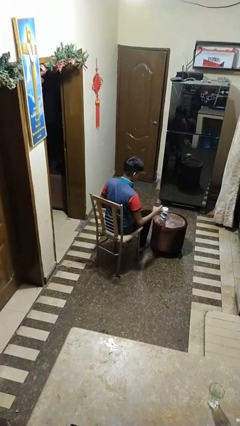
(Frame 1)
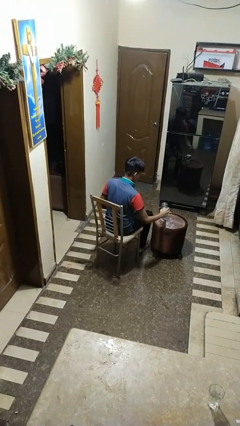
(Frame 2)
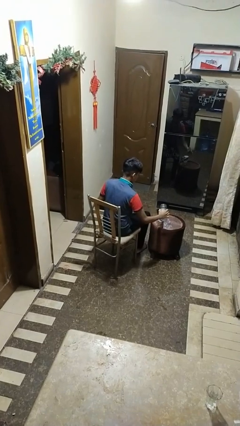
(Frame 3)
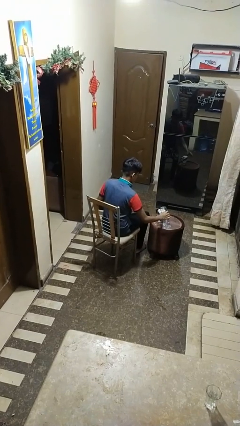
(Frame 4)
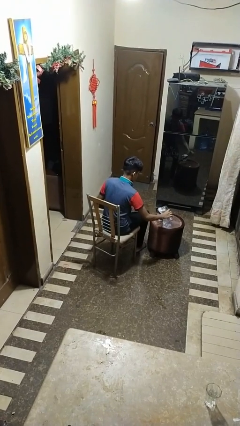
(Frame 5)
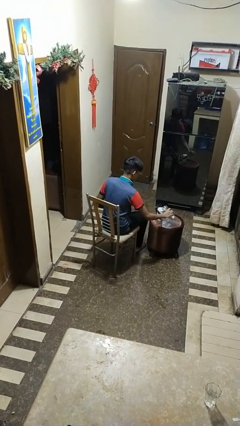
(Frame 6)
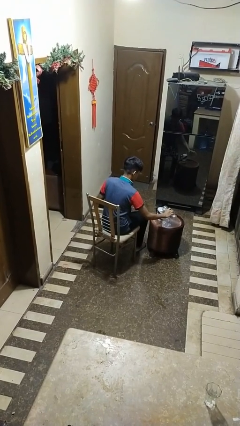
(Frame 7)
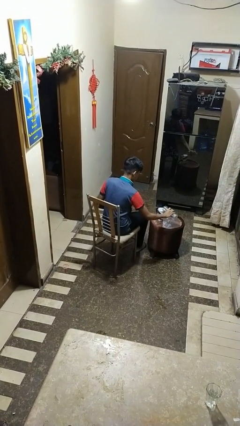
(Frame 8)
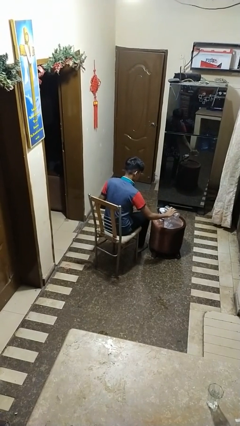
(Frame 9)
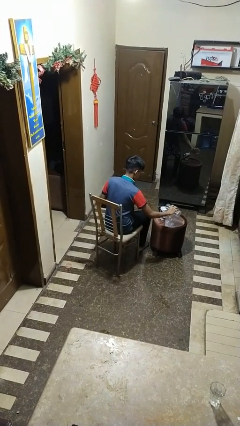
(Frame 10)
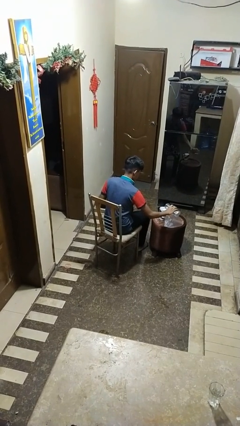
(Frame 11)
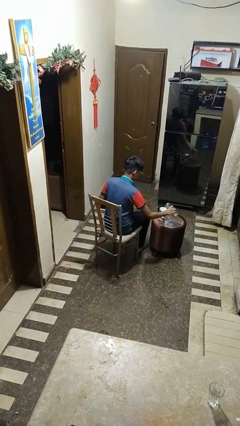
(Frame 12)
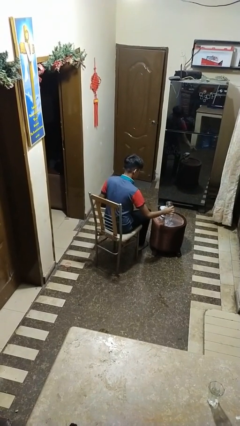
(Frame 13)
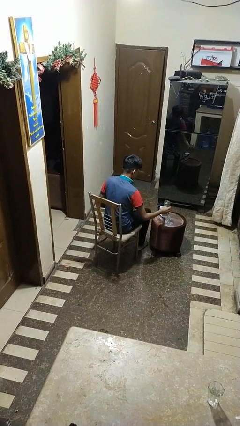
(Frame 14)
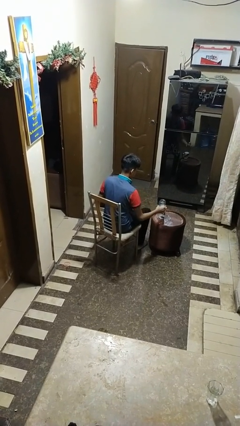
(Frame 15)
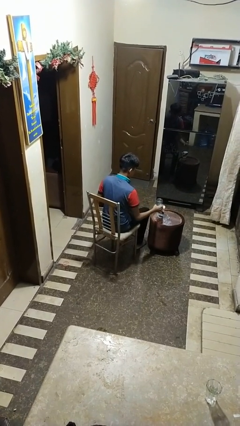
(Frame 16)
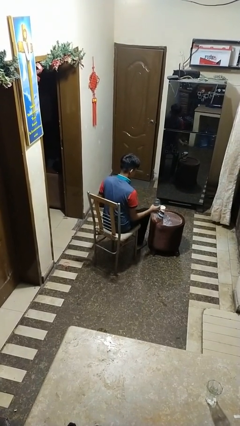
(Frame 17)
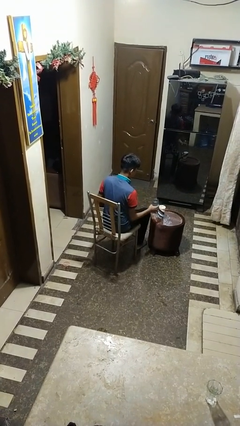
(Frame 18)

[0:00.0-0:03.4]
person pours liquid into cup

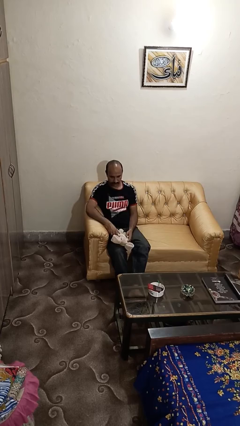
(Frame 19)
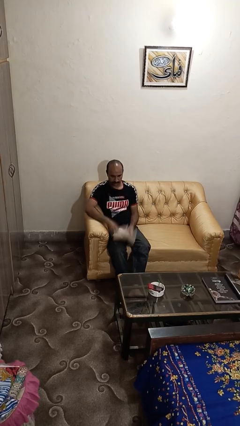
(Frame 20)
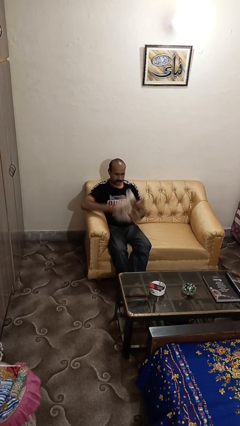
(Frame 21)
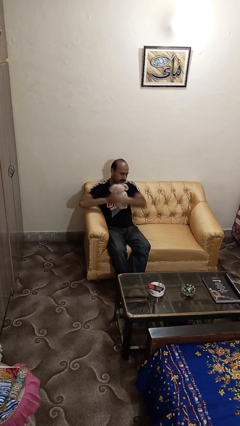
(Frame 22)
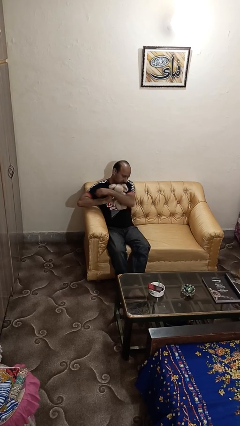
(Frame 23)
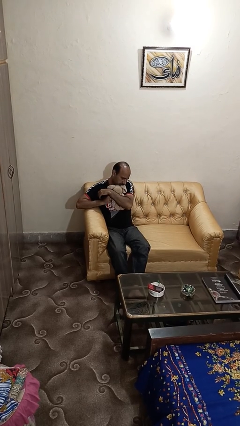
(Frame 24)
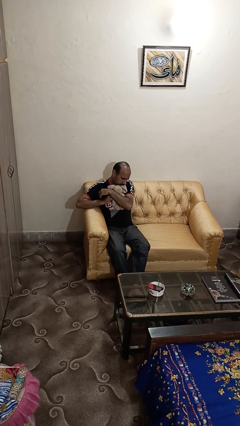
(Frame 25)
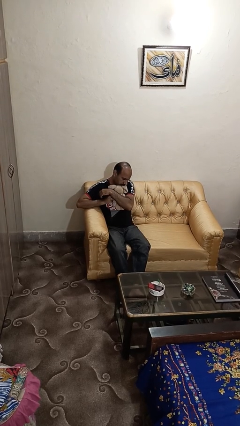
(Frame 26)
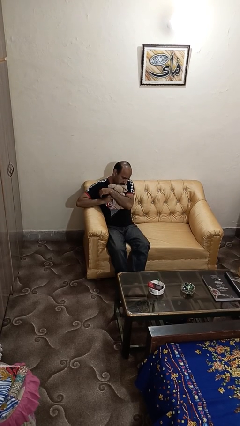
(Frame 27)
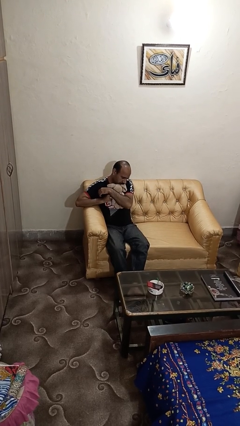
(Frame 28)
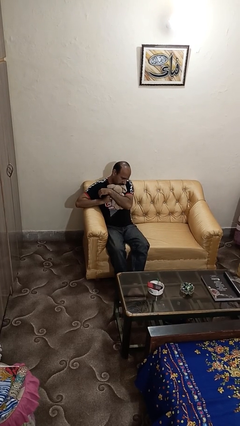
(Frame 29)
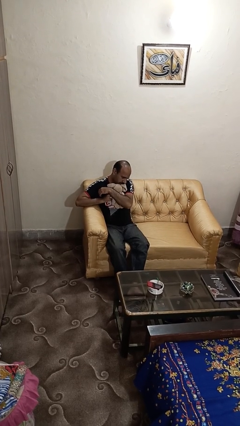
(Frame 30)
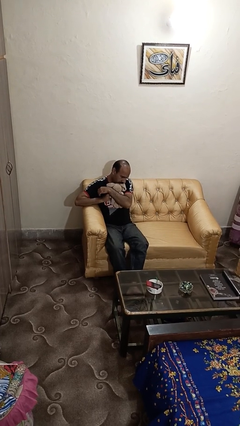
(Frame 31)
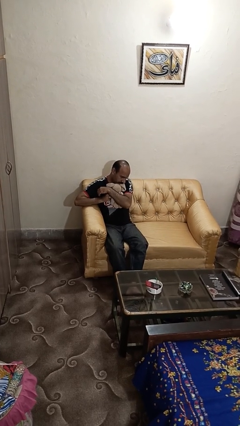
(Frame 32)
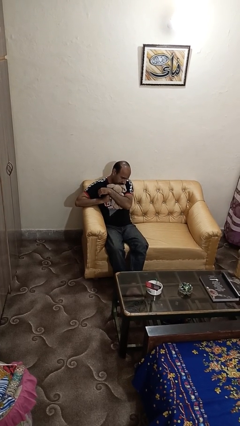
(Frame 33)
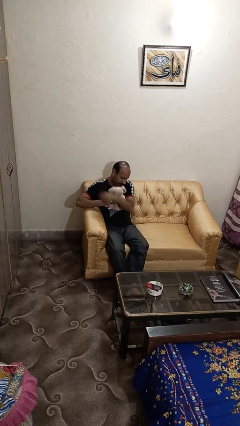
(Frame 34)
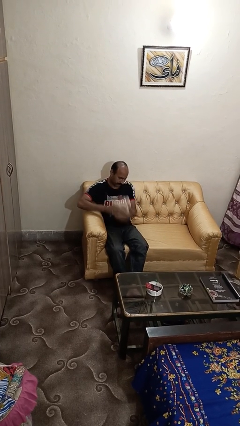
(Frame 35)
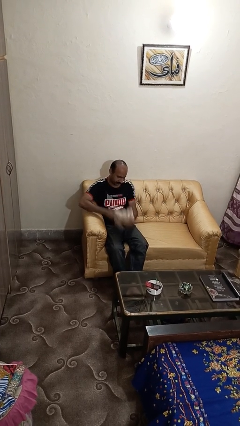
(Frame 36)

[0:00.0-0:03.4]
person hugs stuffed animal

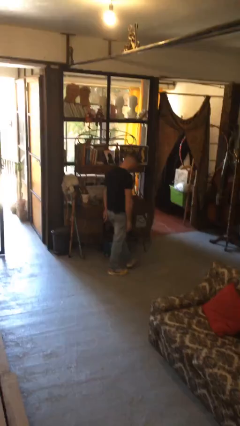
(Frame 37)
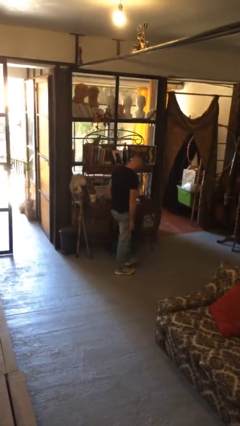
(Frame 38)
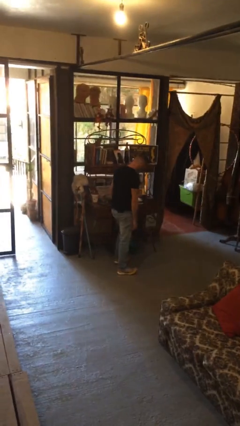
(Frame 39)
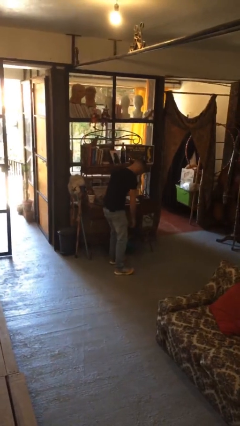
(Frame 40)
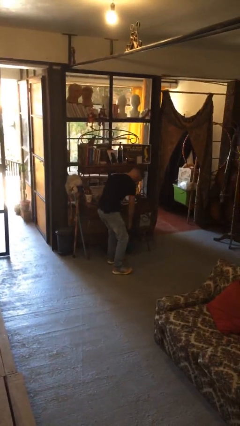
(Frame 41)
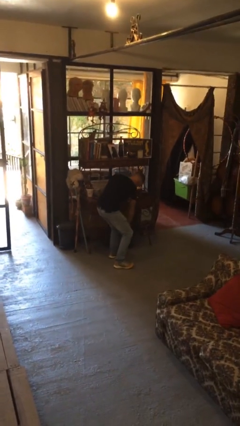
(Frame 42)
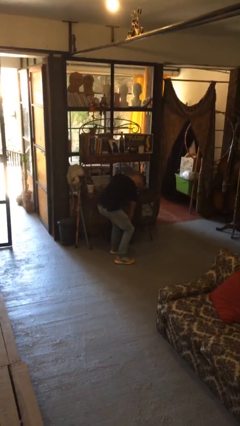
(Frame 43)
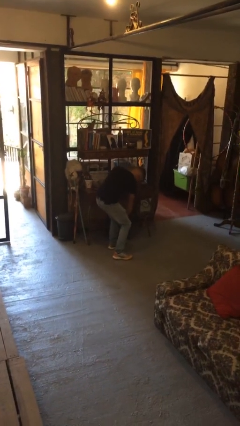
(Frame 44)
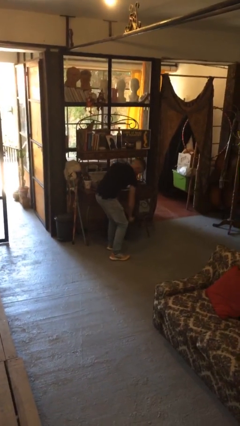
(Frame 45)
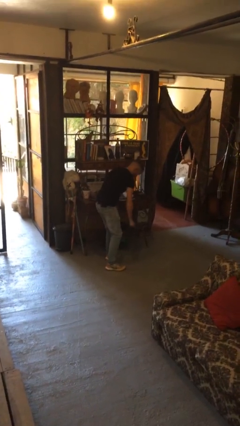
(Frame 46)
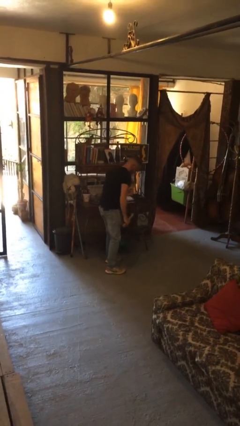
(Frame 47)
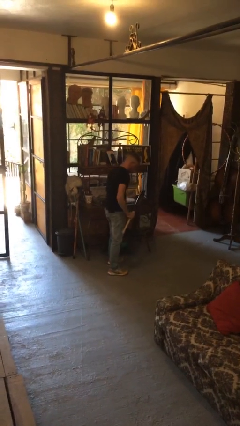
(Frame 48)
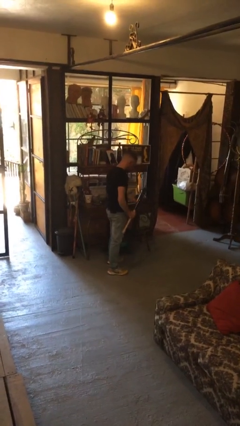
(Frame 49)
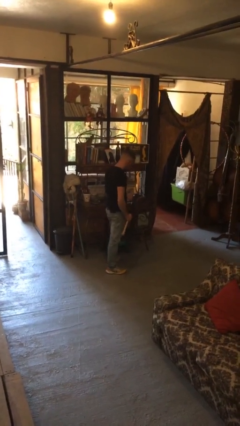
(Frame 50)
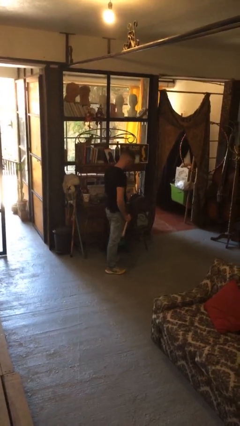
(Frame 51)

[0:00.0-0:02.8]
person picks up object from cabinet

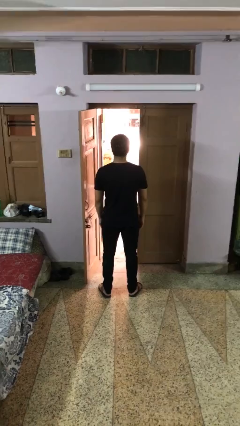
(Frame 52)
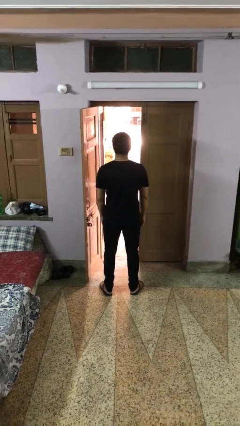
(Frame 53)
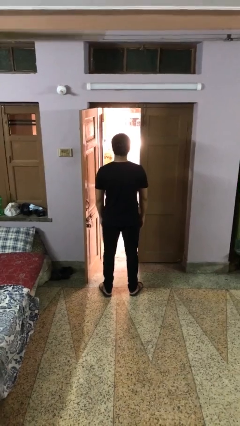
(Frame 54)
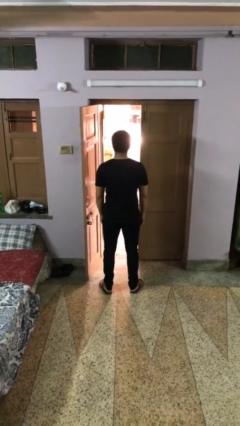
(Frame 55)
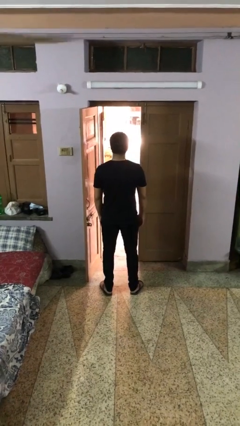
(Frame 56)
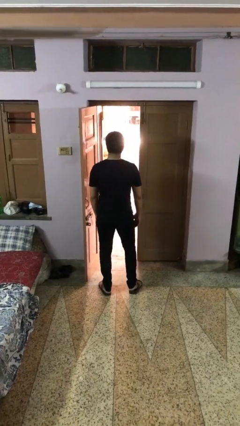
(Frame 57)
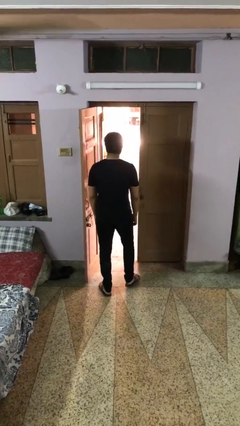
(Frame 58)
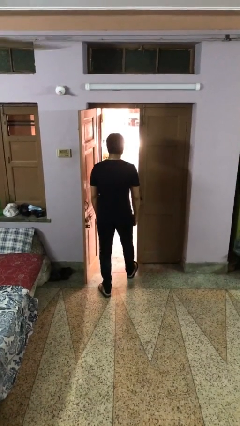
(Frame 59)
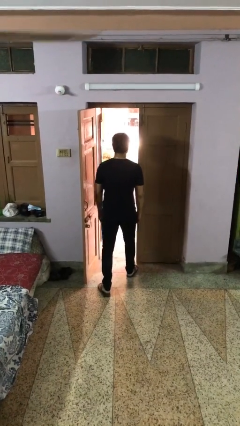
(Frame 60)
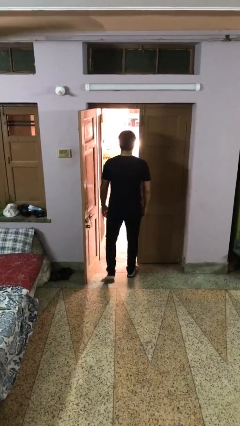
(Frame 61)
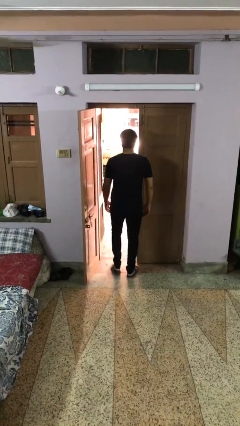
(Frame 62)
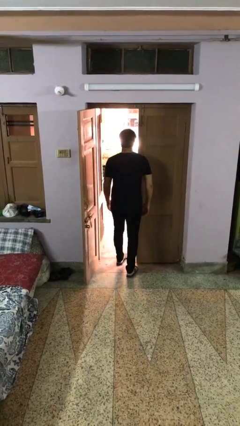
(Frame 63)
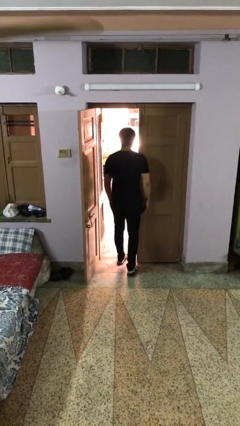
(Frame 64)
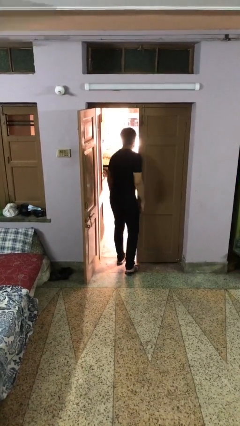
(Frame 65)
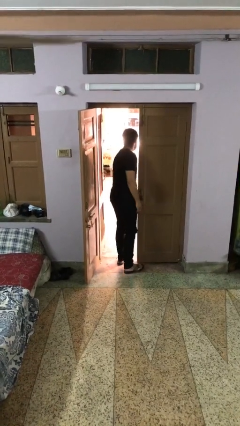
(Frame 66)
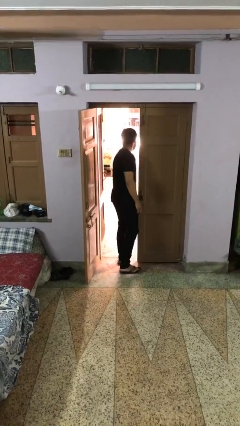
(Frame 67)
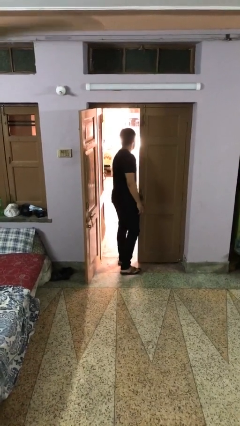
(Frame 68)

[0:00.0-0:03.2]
person bumps into wall

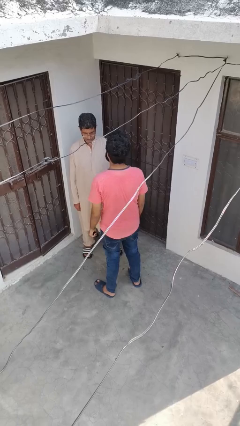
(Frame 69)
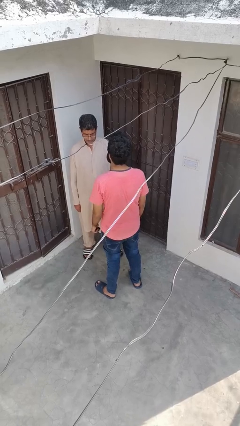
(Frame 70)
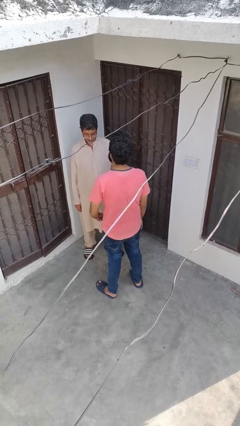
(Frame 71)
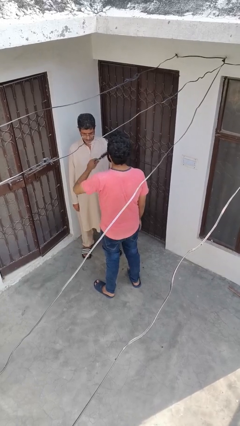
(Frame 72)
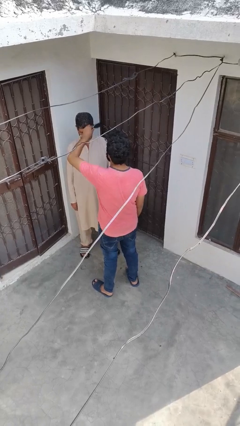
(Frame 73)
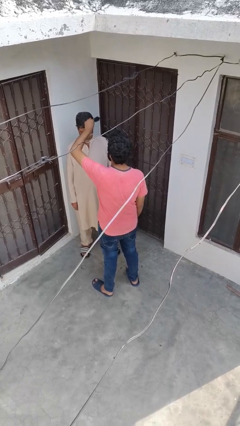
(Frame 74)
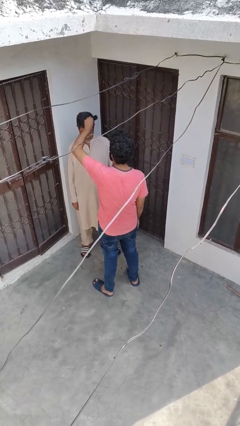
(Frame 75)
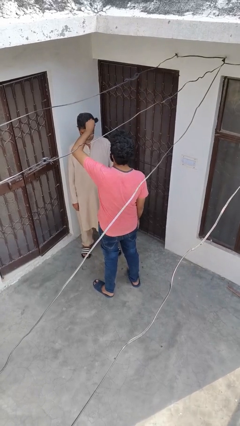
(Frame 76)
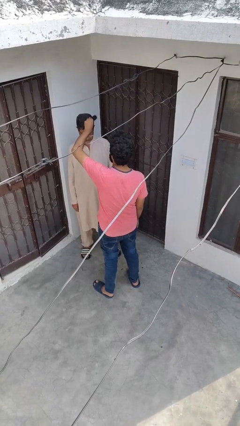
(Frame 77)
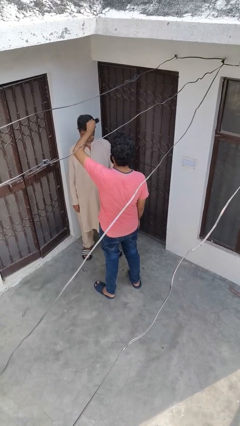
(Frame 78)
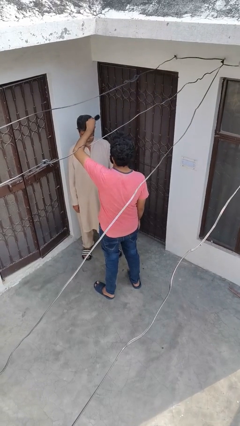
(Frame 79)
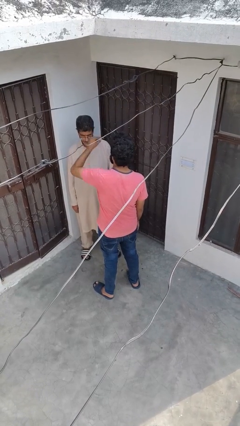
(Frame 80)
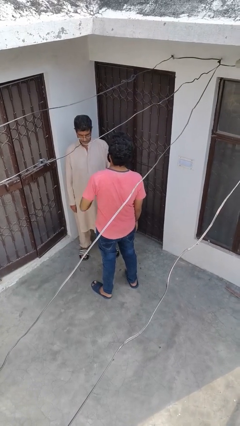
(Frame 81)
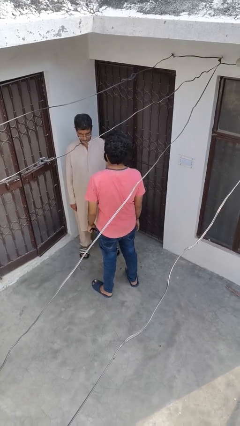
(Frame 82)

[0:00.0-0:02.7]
person brushes hair of person

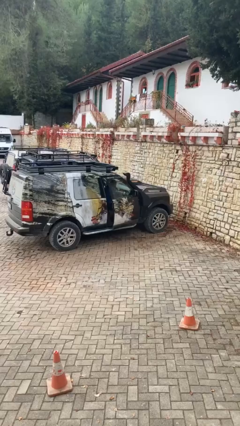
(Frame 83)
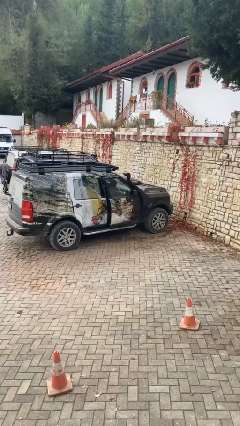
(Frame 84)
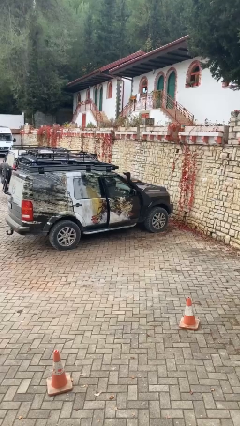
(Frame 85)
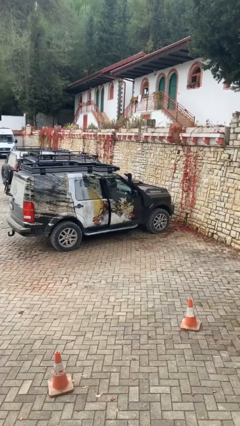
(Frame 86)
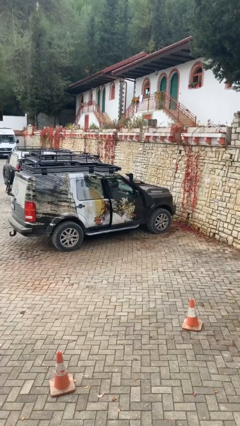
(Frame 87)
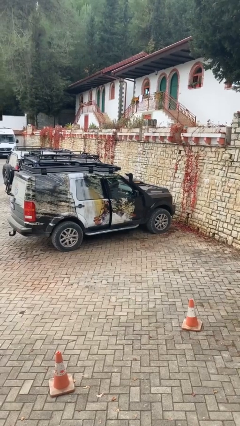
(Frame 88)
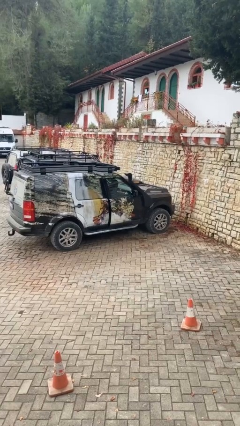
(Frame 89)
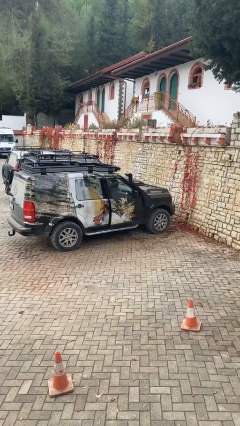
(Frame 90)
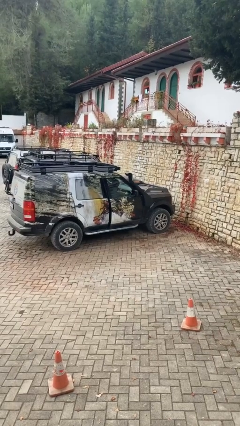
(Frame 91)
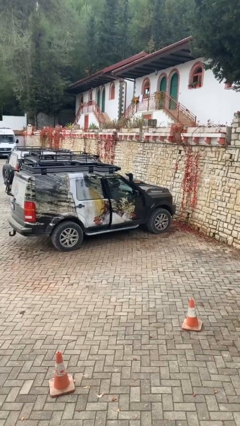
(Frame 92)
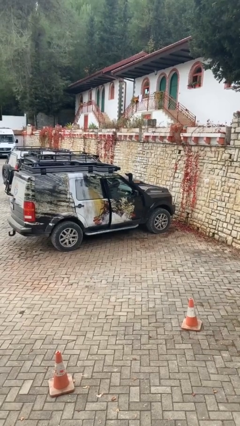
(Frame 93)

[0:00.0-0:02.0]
person closes car door

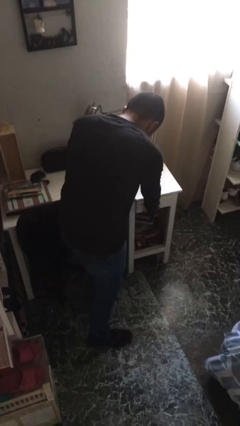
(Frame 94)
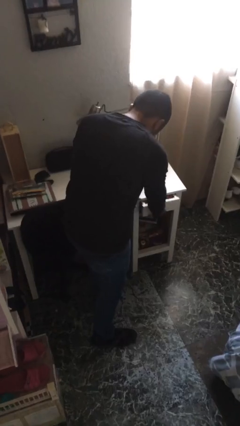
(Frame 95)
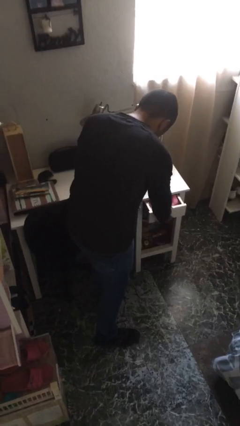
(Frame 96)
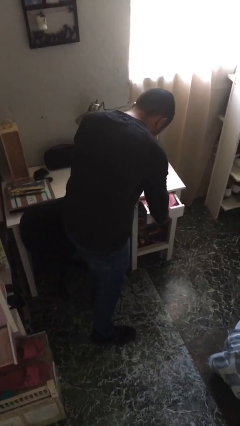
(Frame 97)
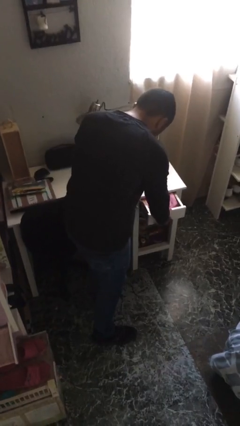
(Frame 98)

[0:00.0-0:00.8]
person opens dresser drawer
